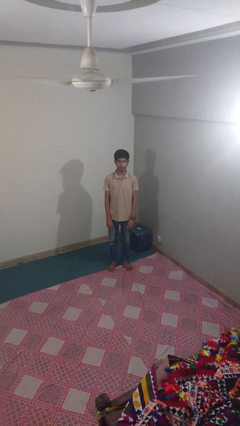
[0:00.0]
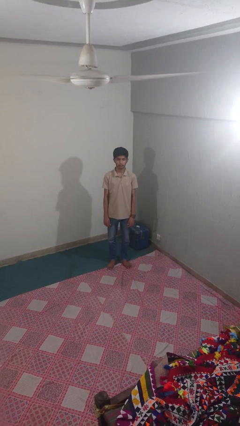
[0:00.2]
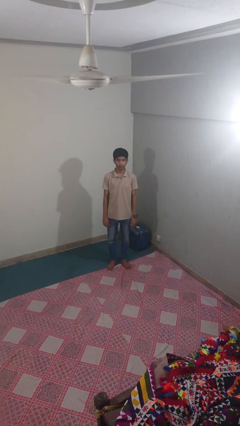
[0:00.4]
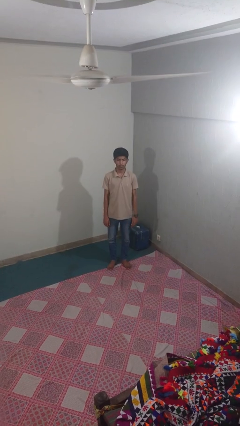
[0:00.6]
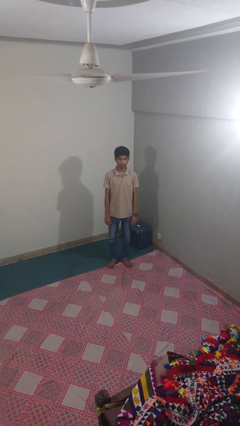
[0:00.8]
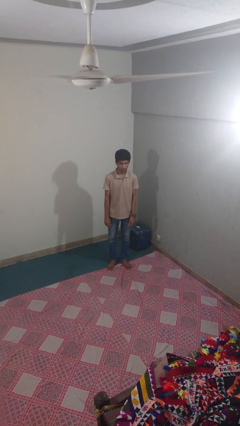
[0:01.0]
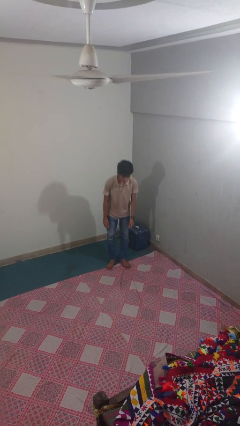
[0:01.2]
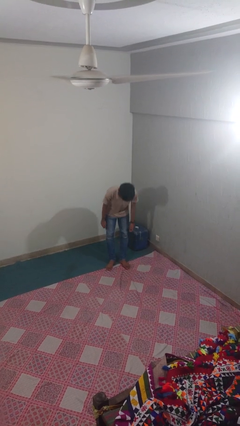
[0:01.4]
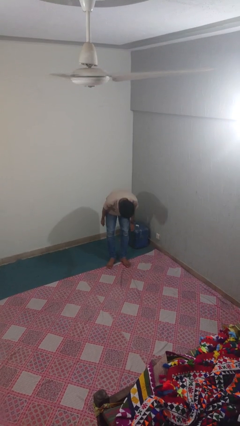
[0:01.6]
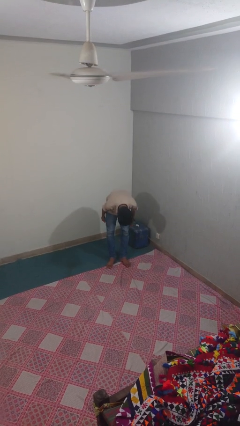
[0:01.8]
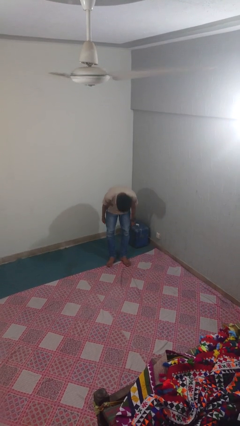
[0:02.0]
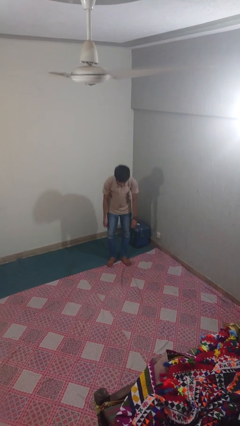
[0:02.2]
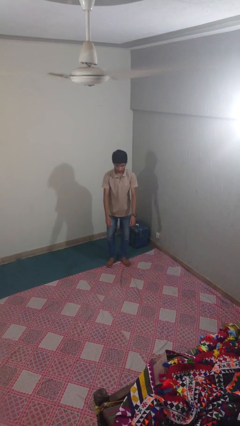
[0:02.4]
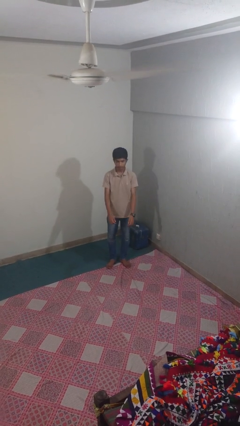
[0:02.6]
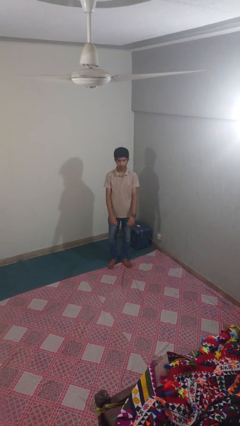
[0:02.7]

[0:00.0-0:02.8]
person bows

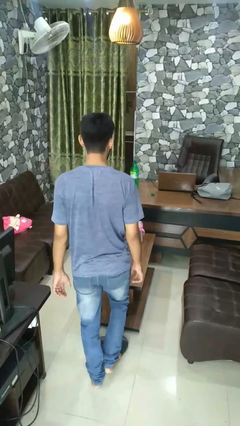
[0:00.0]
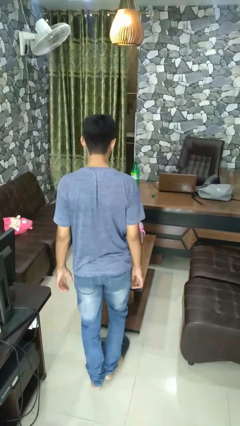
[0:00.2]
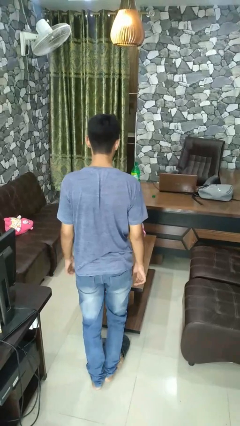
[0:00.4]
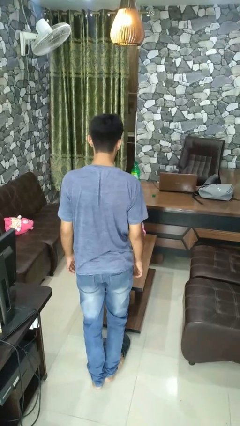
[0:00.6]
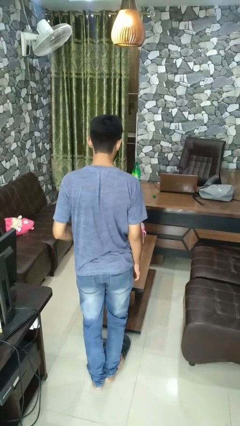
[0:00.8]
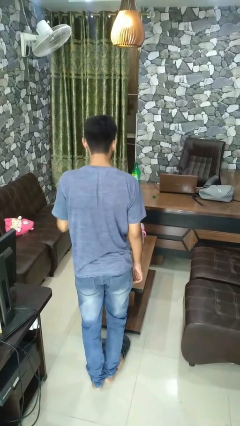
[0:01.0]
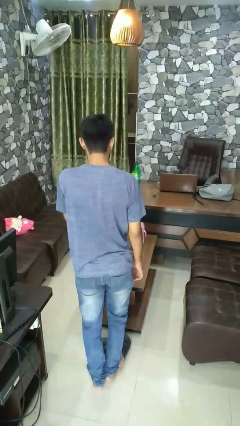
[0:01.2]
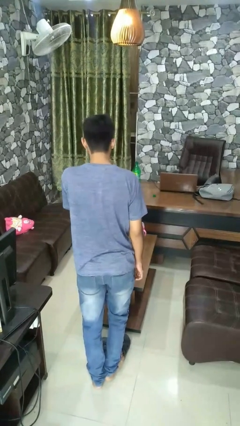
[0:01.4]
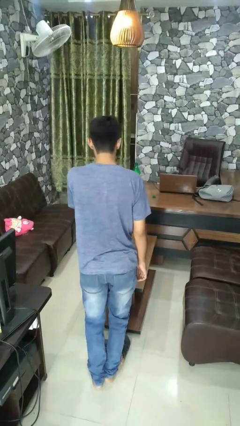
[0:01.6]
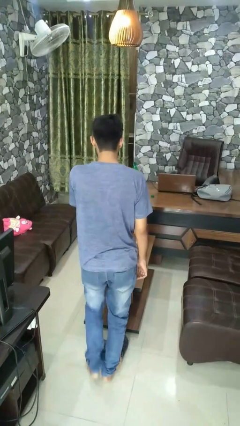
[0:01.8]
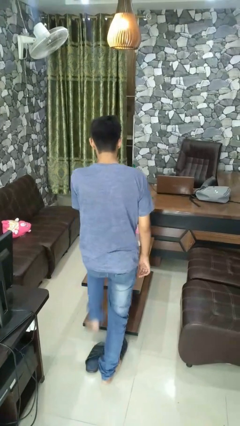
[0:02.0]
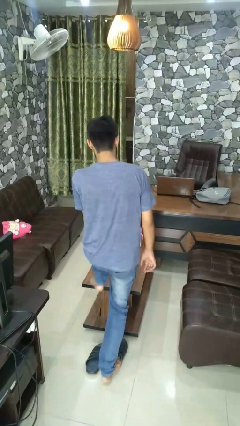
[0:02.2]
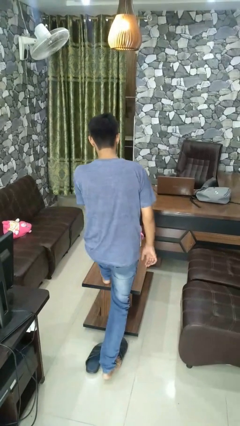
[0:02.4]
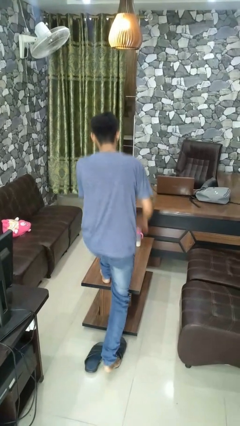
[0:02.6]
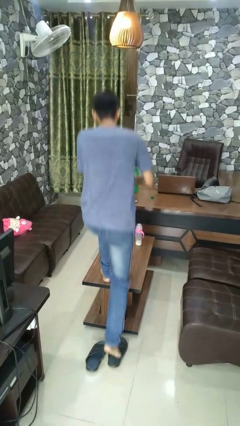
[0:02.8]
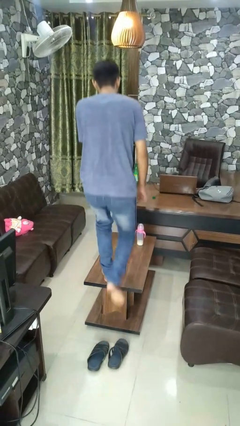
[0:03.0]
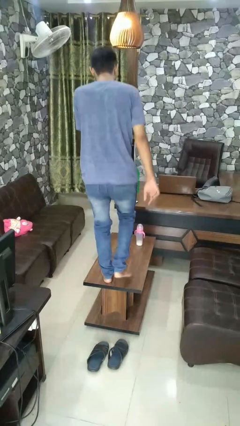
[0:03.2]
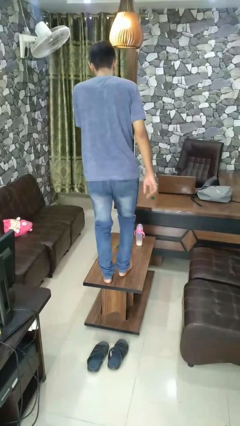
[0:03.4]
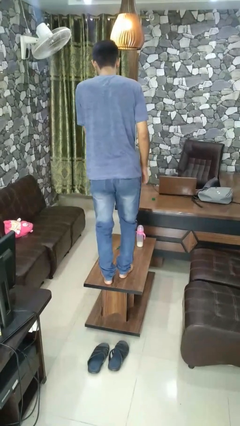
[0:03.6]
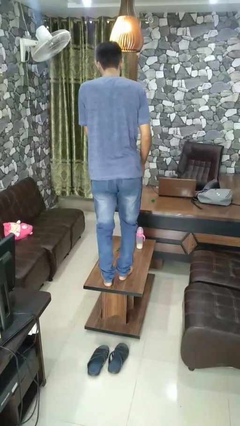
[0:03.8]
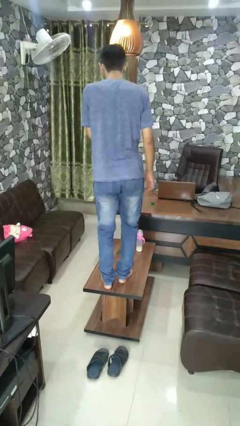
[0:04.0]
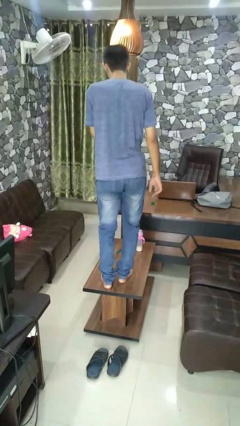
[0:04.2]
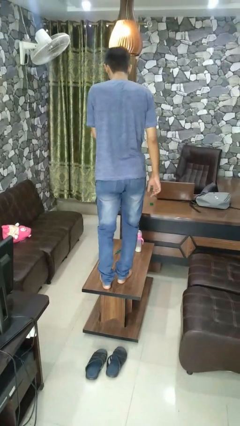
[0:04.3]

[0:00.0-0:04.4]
person climbs on table

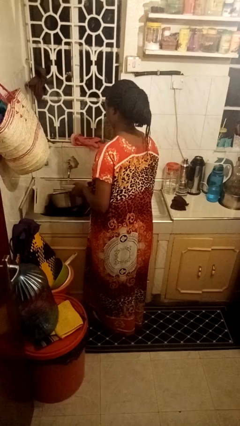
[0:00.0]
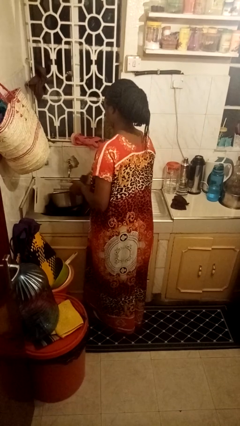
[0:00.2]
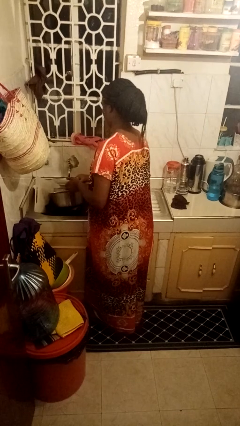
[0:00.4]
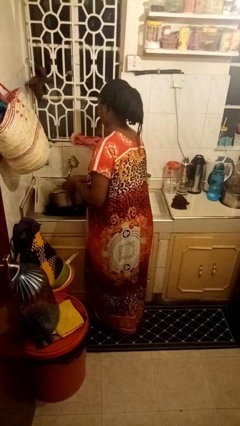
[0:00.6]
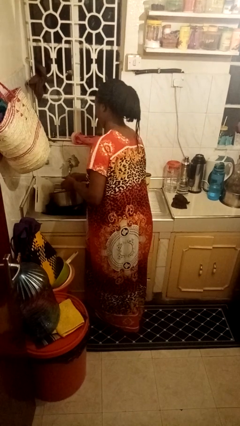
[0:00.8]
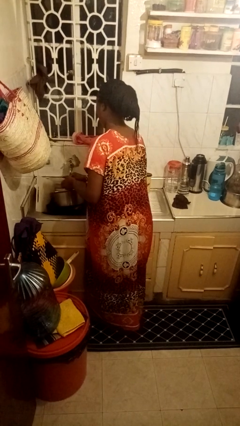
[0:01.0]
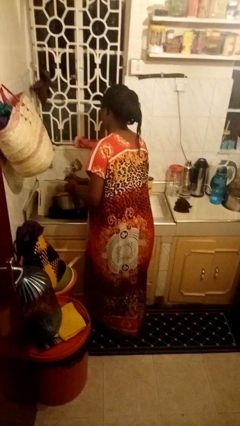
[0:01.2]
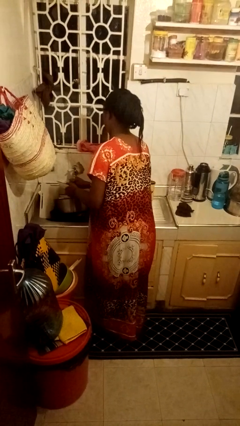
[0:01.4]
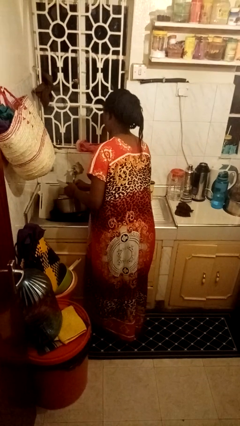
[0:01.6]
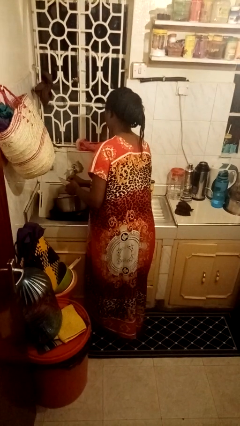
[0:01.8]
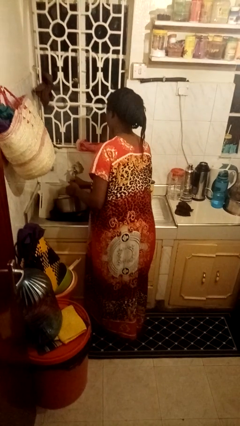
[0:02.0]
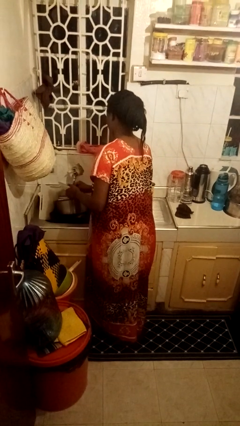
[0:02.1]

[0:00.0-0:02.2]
person washes dish

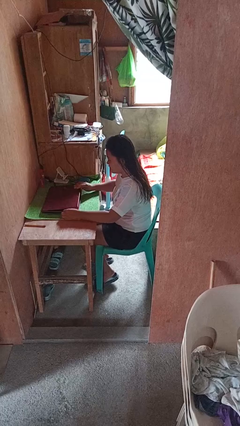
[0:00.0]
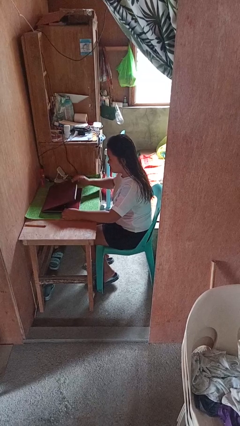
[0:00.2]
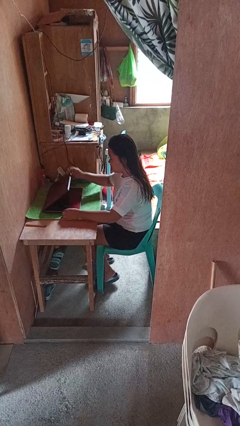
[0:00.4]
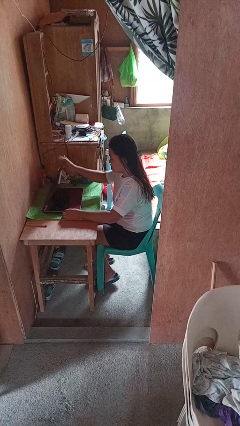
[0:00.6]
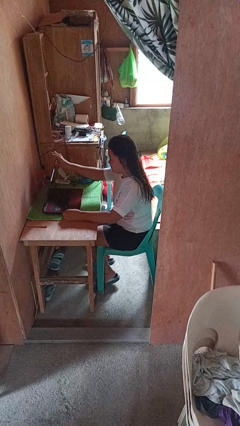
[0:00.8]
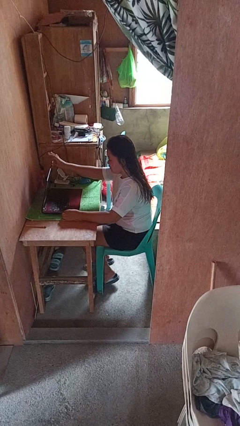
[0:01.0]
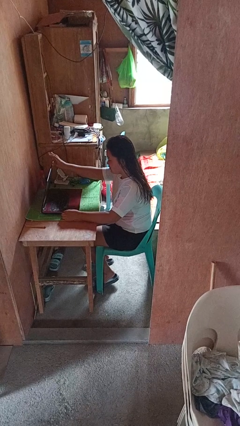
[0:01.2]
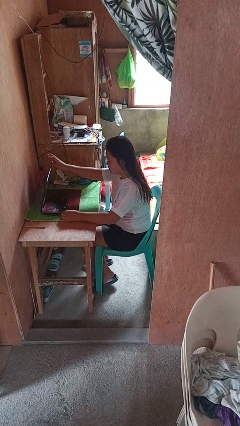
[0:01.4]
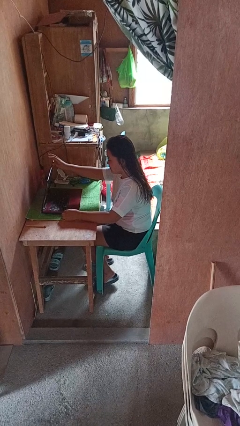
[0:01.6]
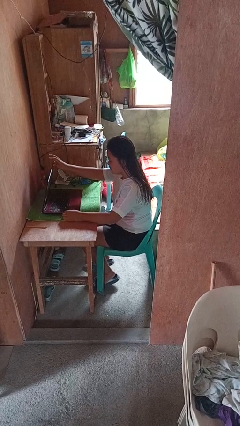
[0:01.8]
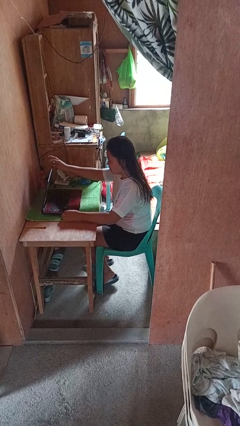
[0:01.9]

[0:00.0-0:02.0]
person opens laptop

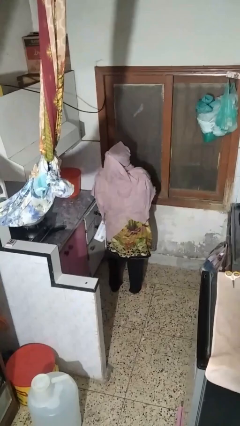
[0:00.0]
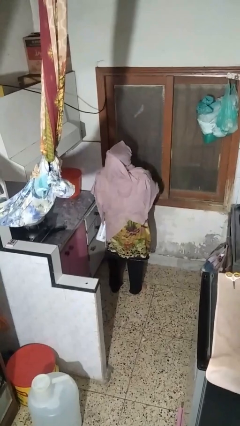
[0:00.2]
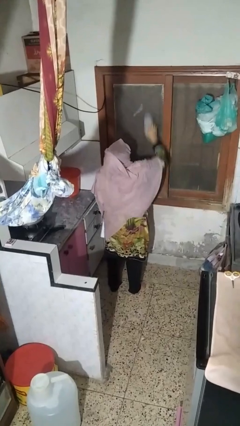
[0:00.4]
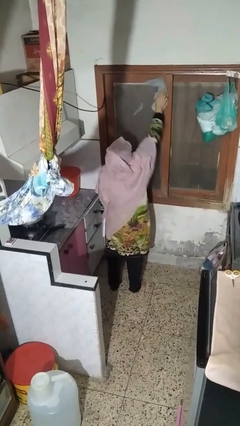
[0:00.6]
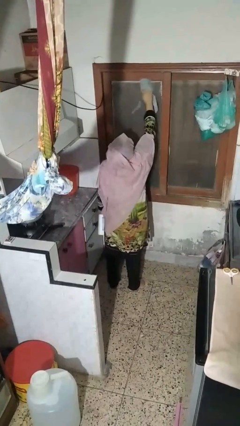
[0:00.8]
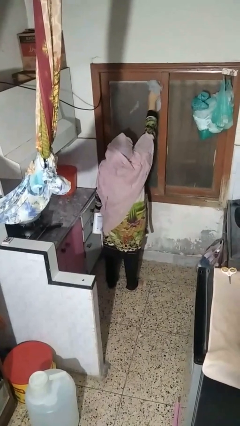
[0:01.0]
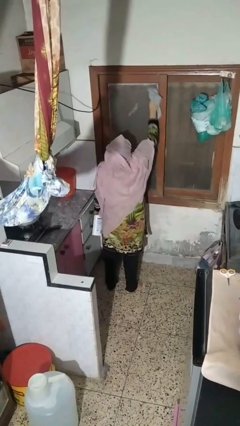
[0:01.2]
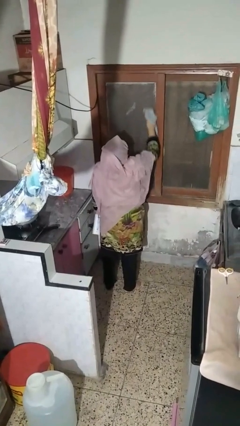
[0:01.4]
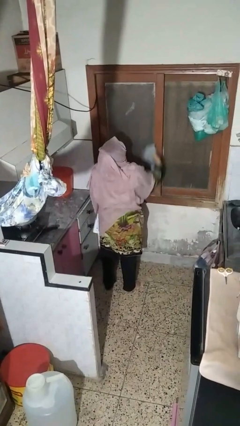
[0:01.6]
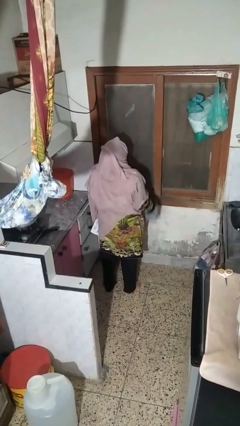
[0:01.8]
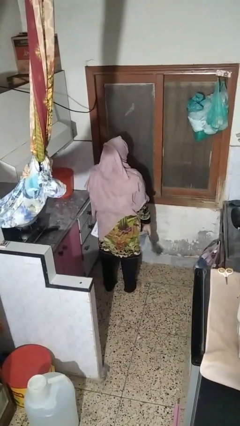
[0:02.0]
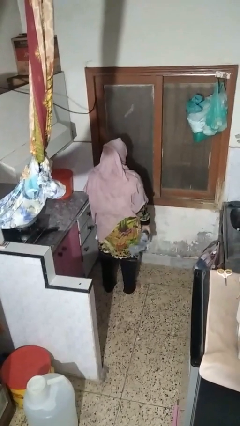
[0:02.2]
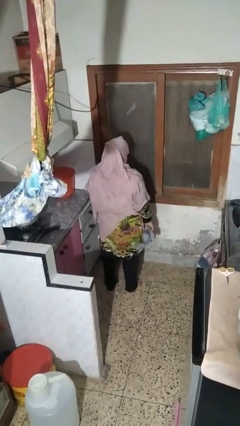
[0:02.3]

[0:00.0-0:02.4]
person washes window

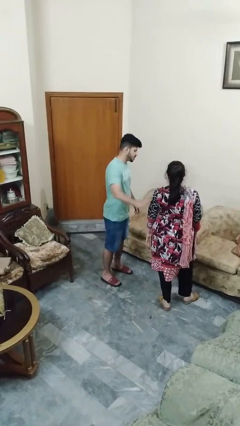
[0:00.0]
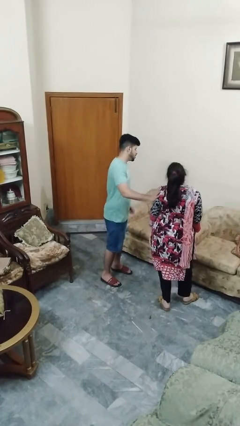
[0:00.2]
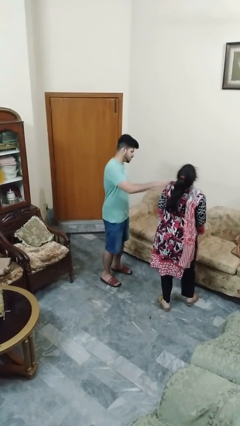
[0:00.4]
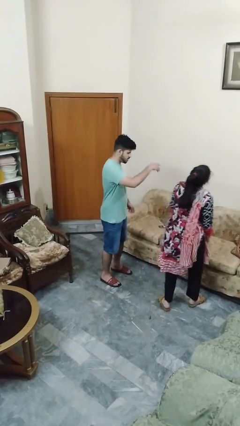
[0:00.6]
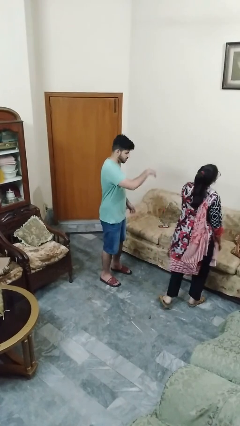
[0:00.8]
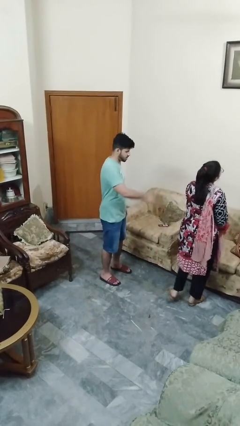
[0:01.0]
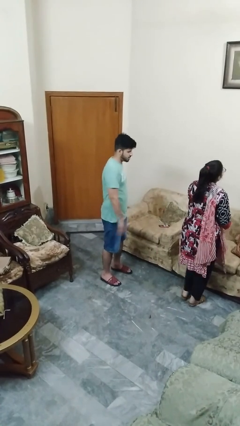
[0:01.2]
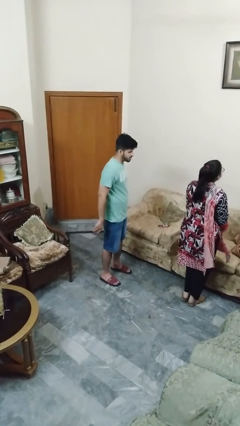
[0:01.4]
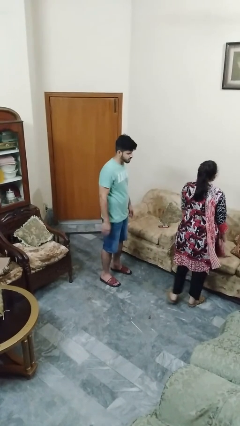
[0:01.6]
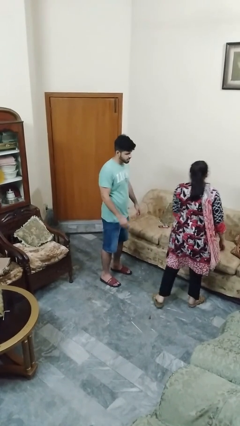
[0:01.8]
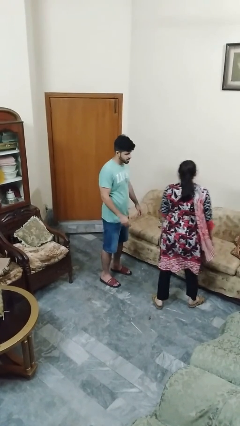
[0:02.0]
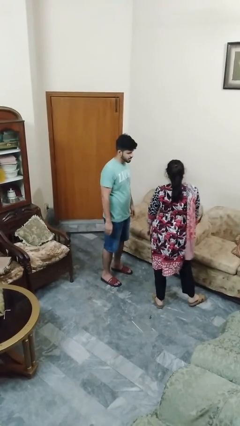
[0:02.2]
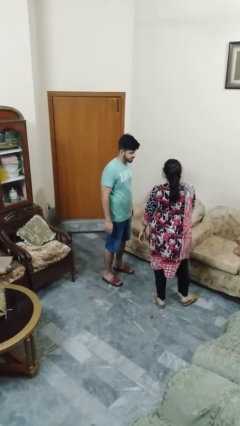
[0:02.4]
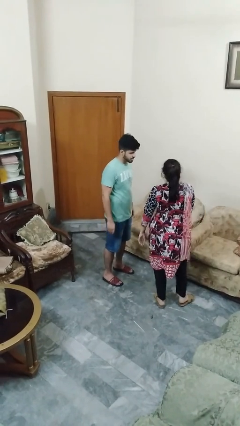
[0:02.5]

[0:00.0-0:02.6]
person shoves person

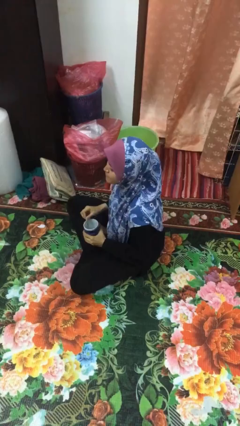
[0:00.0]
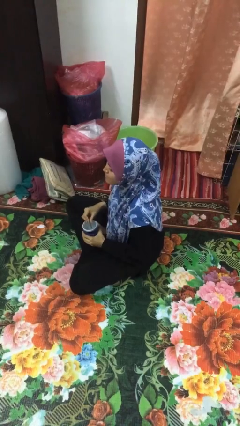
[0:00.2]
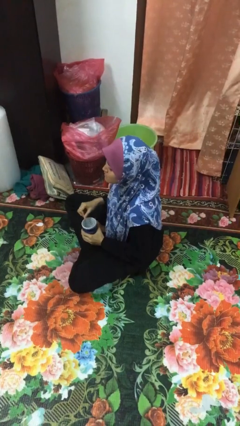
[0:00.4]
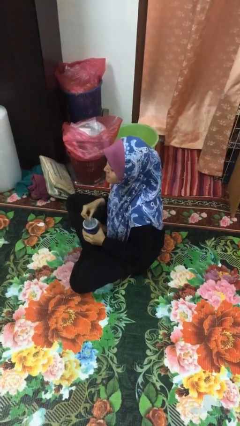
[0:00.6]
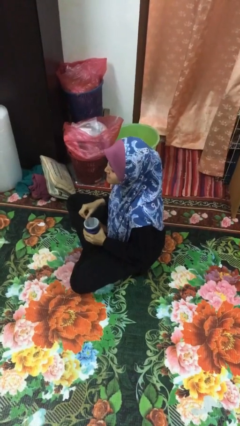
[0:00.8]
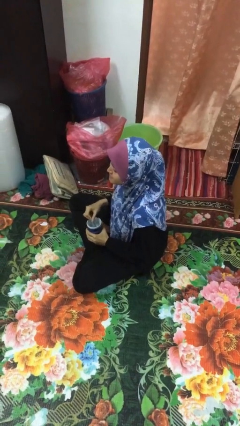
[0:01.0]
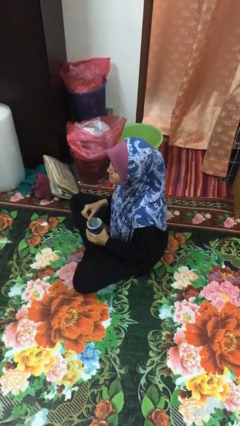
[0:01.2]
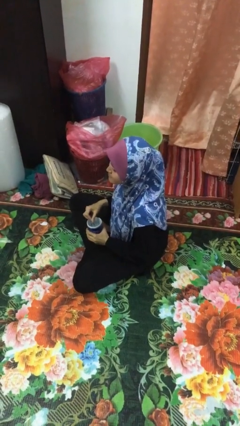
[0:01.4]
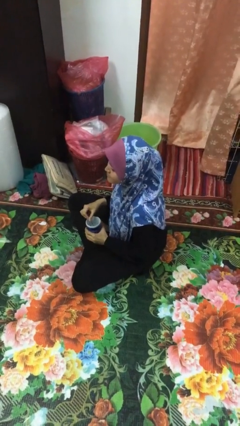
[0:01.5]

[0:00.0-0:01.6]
person stirs mug
